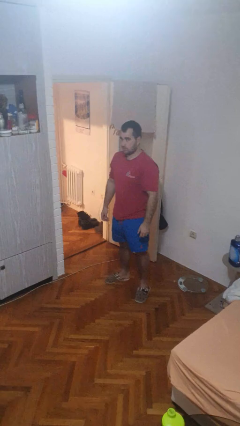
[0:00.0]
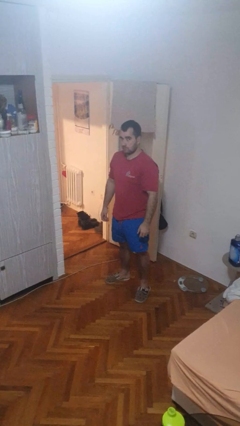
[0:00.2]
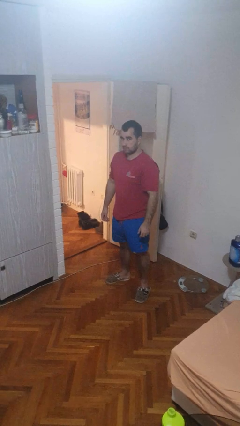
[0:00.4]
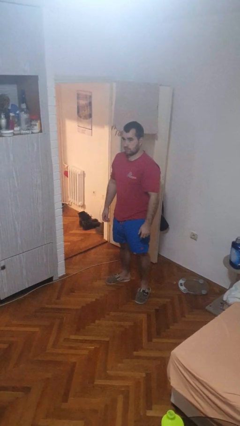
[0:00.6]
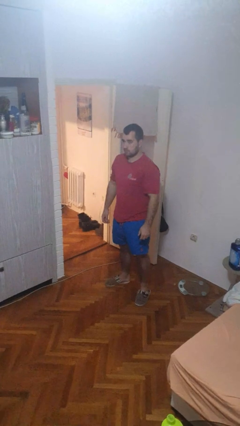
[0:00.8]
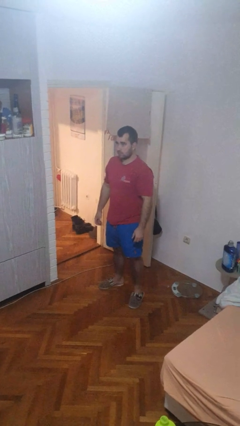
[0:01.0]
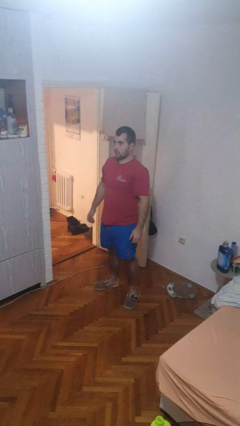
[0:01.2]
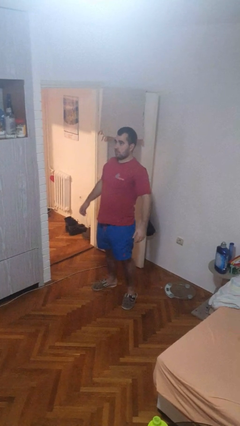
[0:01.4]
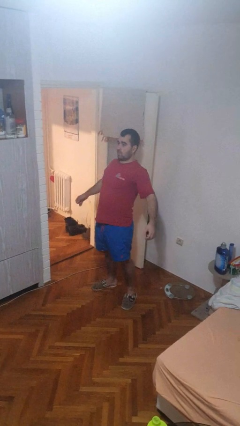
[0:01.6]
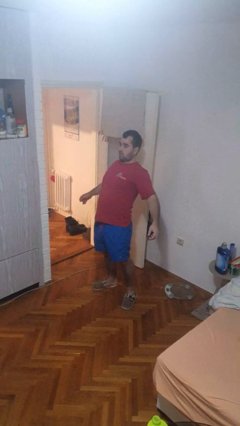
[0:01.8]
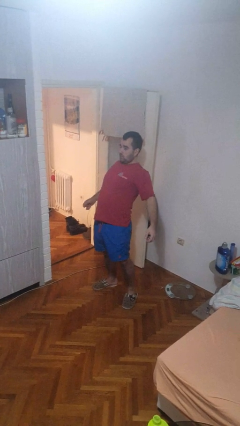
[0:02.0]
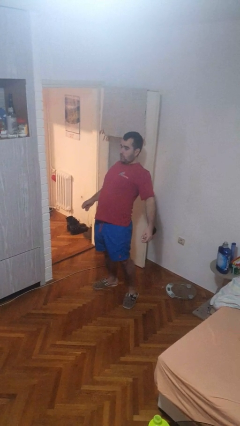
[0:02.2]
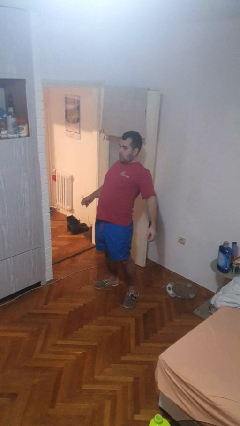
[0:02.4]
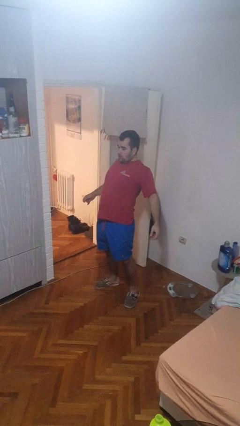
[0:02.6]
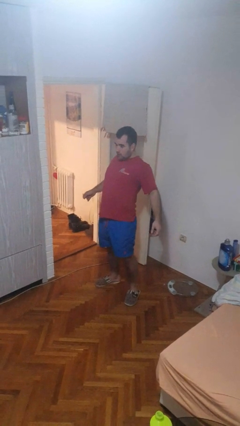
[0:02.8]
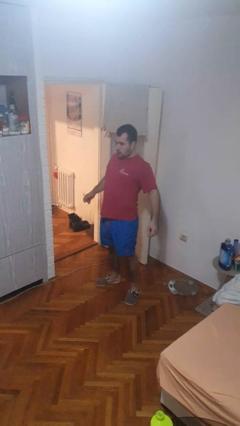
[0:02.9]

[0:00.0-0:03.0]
person stretches back

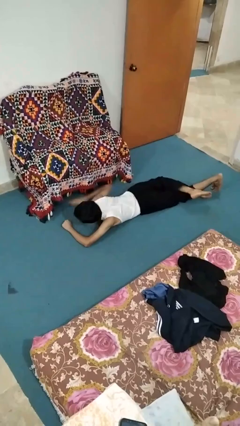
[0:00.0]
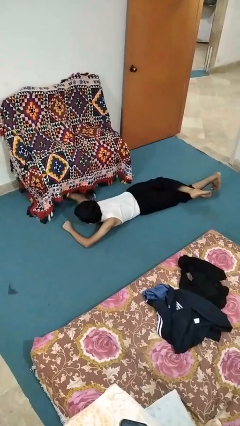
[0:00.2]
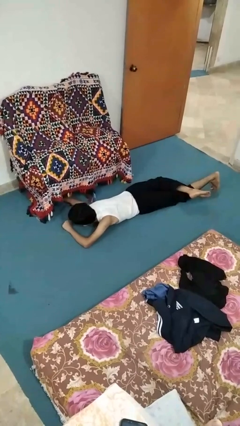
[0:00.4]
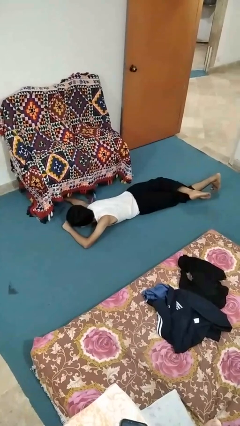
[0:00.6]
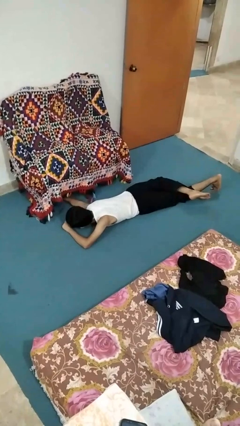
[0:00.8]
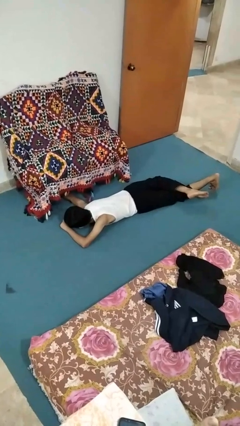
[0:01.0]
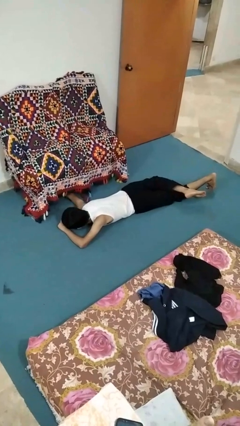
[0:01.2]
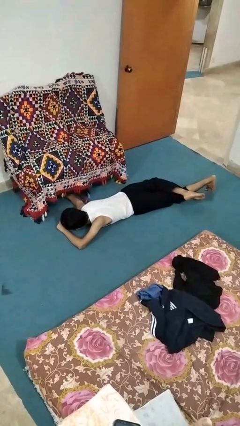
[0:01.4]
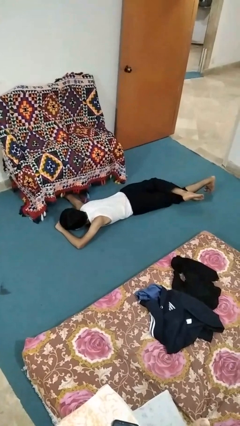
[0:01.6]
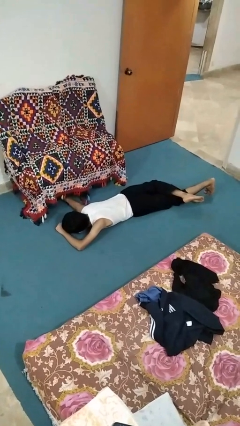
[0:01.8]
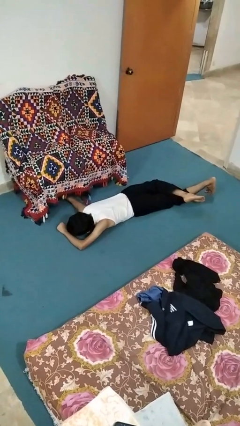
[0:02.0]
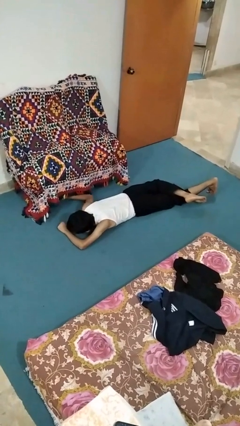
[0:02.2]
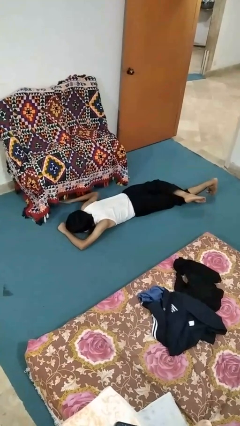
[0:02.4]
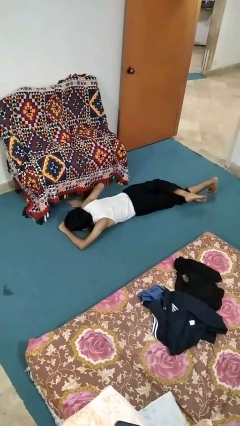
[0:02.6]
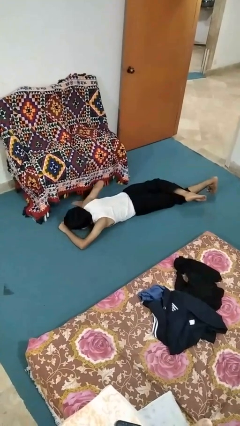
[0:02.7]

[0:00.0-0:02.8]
person searches under couch

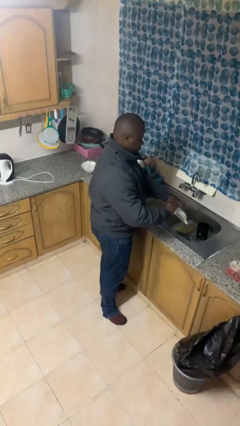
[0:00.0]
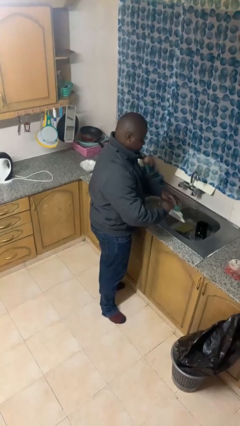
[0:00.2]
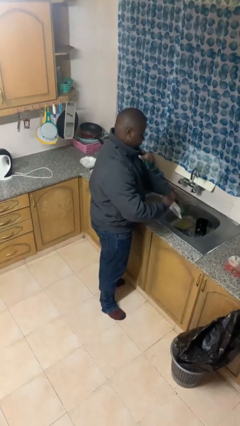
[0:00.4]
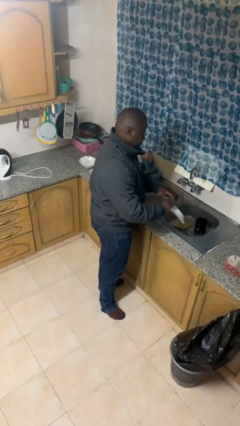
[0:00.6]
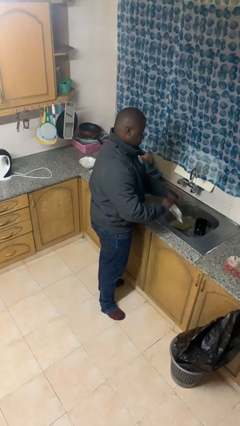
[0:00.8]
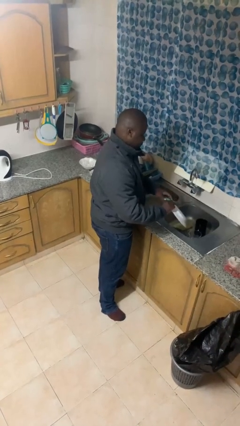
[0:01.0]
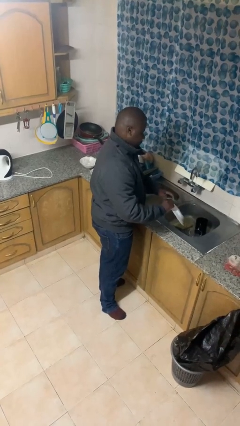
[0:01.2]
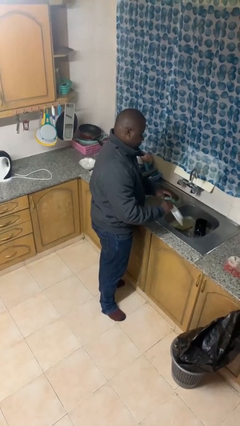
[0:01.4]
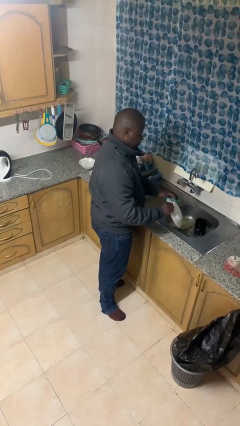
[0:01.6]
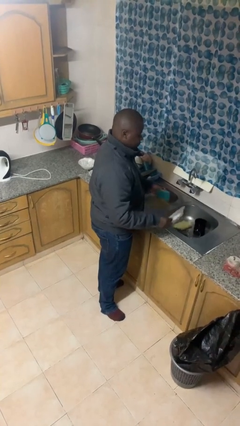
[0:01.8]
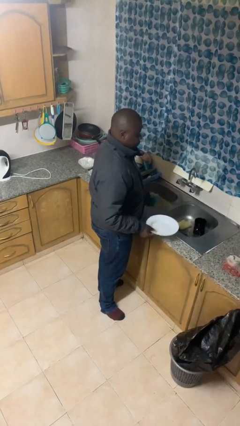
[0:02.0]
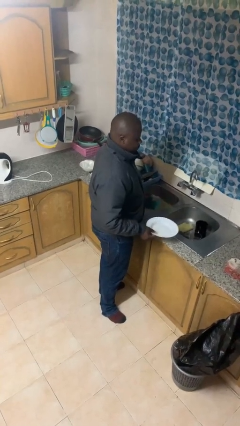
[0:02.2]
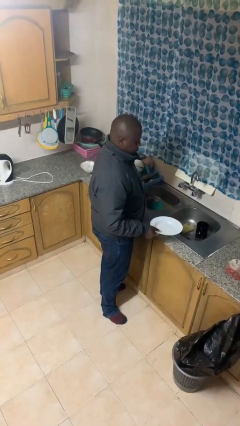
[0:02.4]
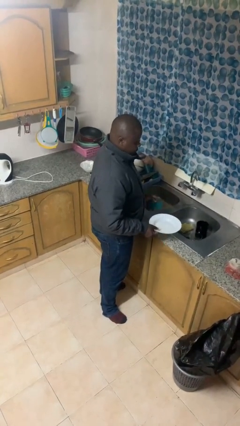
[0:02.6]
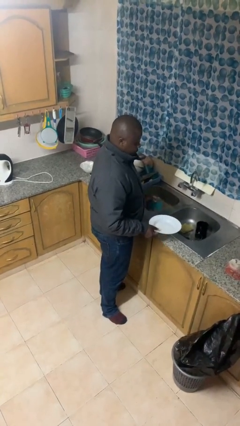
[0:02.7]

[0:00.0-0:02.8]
person washes dish

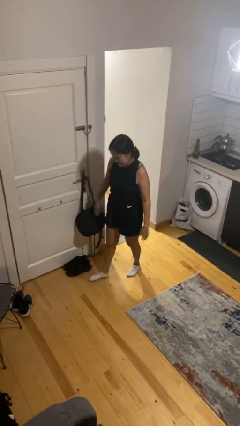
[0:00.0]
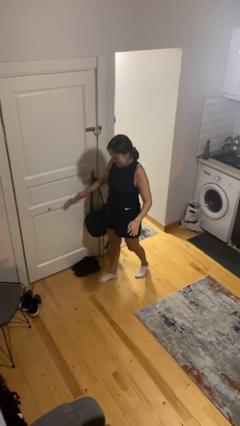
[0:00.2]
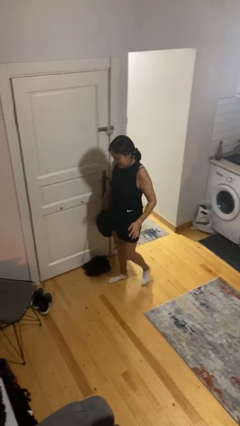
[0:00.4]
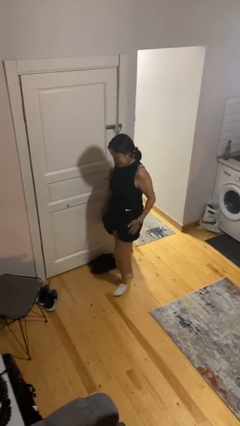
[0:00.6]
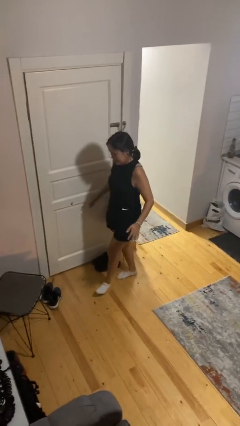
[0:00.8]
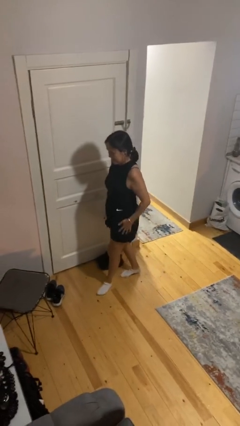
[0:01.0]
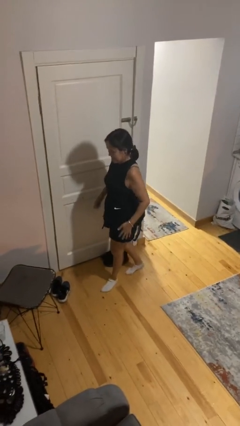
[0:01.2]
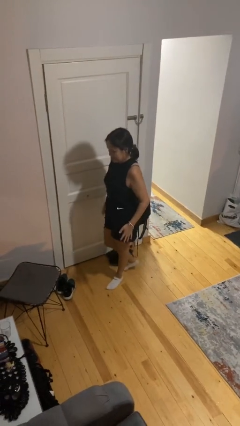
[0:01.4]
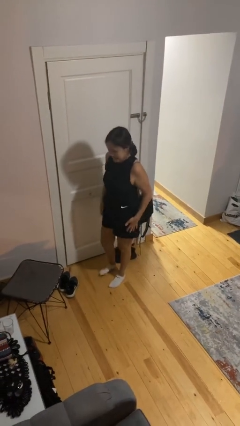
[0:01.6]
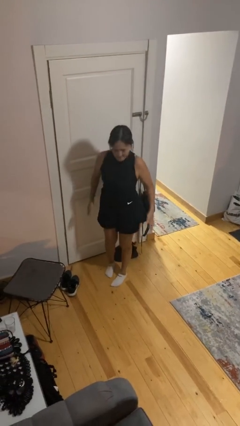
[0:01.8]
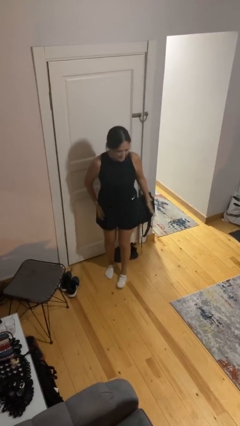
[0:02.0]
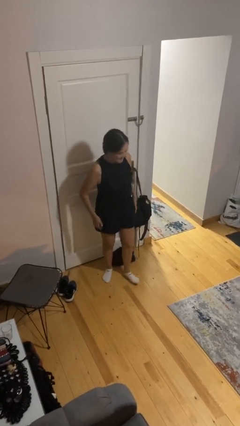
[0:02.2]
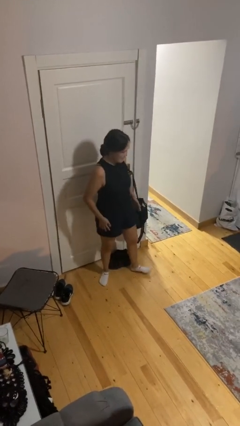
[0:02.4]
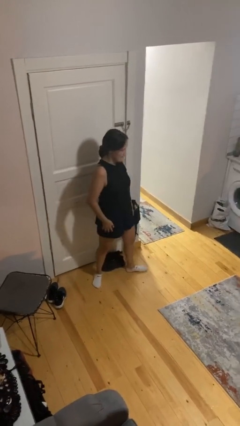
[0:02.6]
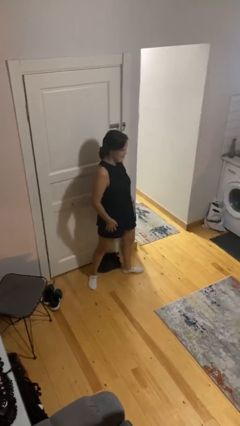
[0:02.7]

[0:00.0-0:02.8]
person slaps hands on thighs

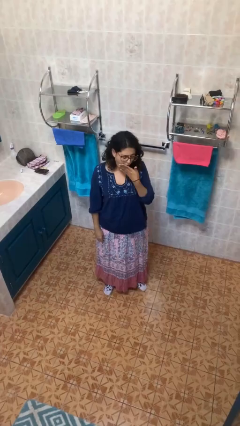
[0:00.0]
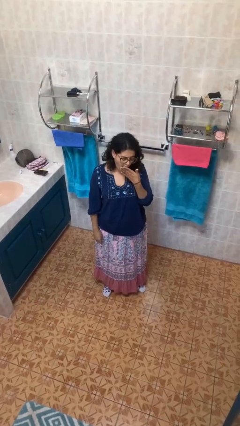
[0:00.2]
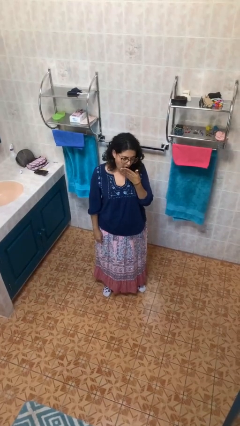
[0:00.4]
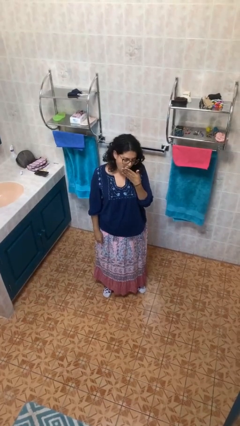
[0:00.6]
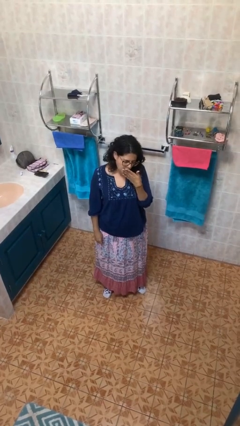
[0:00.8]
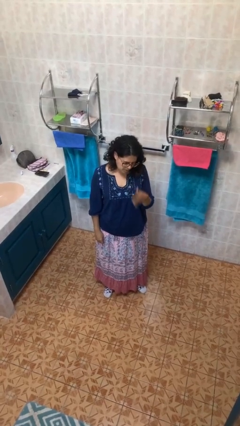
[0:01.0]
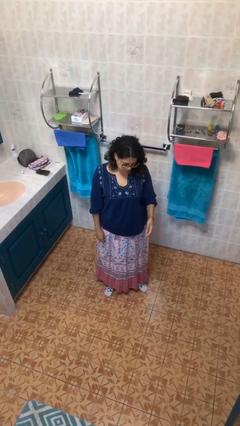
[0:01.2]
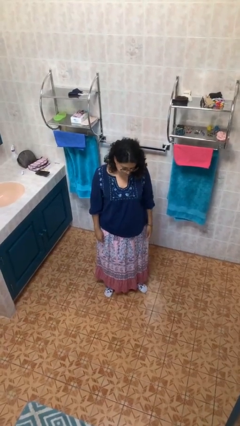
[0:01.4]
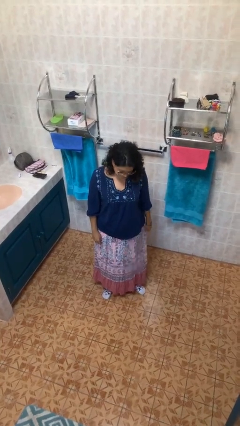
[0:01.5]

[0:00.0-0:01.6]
person yawns

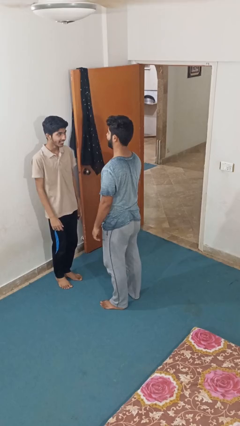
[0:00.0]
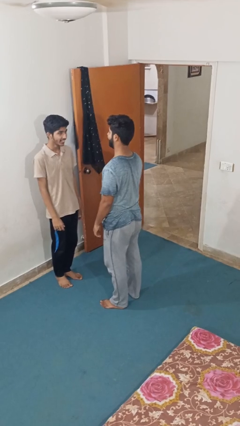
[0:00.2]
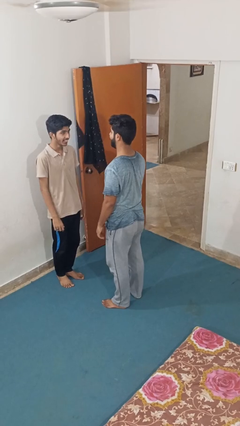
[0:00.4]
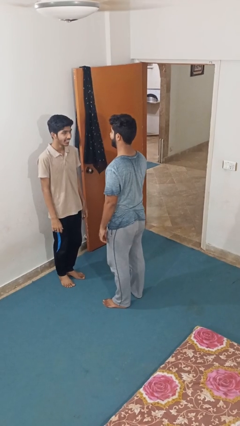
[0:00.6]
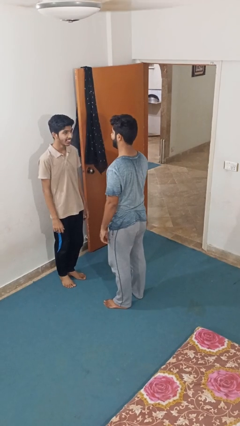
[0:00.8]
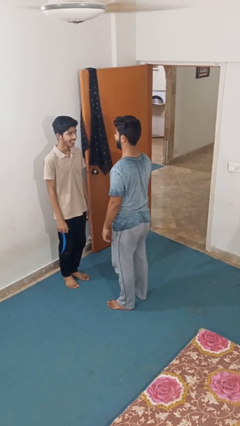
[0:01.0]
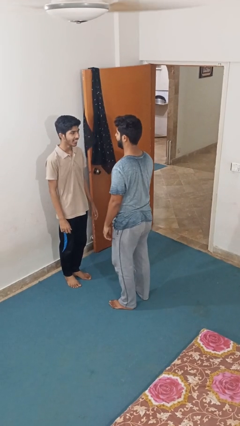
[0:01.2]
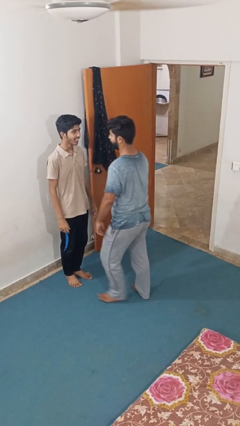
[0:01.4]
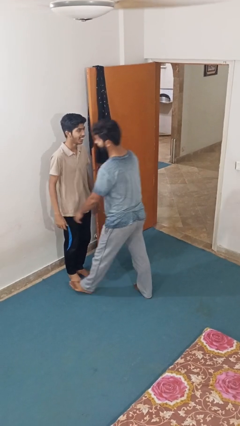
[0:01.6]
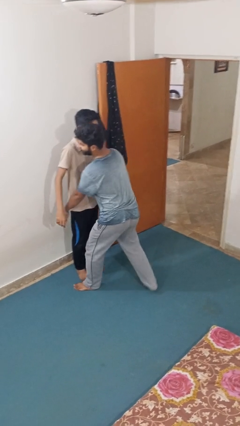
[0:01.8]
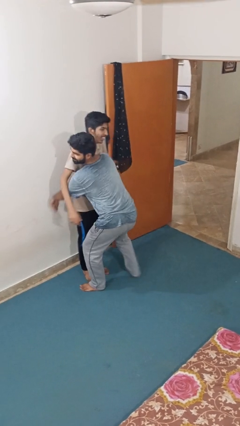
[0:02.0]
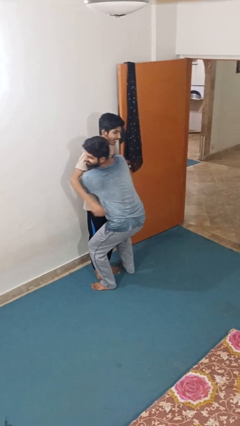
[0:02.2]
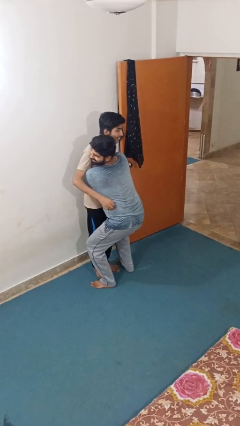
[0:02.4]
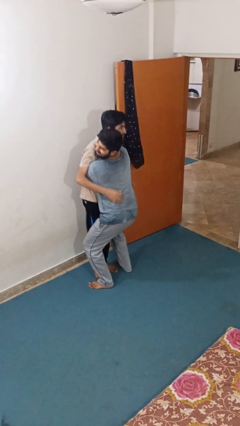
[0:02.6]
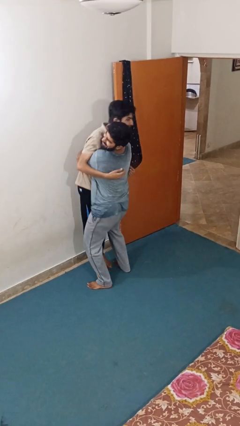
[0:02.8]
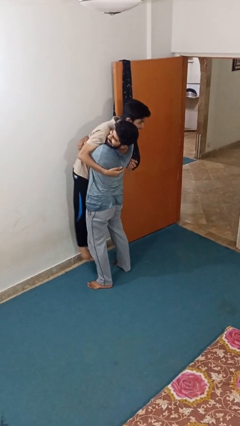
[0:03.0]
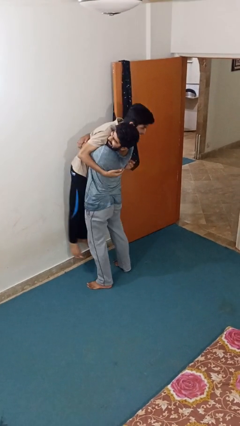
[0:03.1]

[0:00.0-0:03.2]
person picks up person

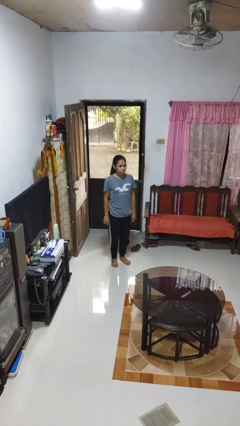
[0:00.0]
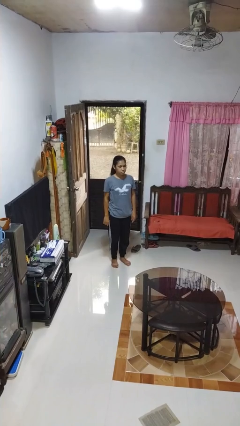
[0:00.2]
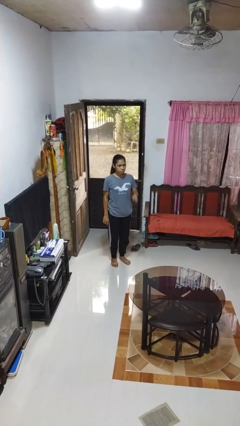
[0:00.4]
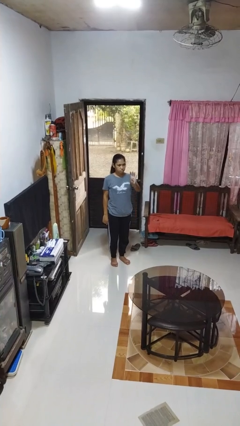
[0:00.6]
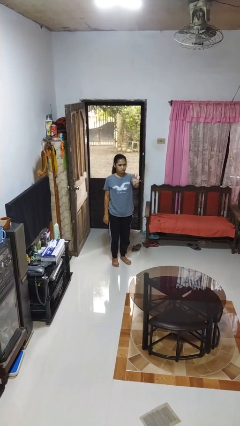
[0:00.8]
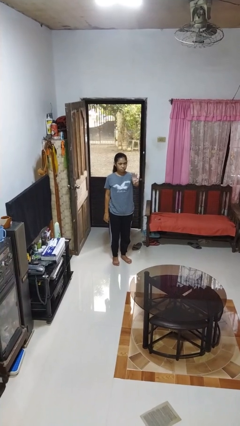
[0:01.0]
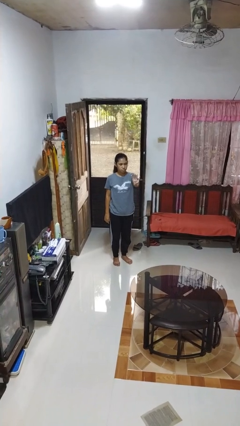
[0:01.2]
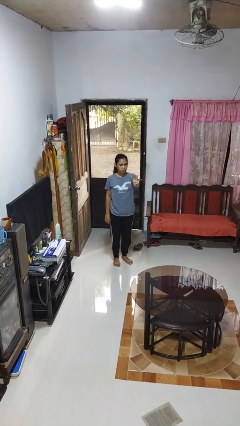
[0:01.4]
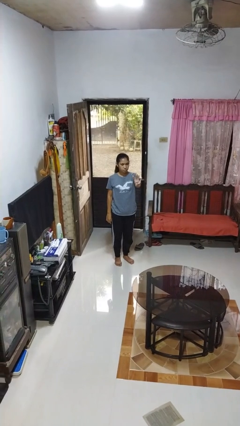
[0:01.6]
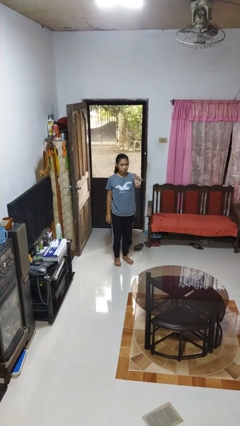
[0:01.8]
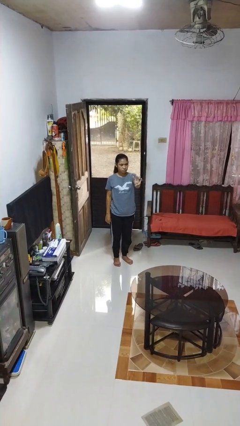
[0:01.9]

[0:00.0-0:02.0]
person gestures number four
